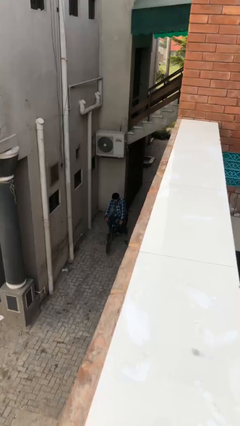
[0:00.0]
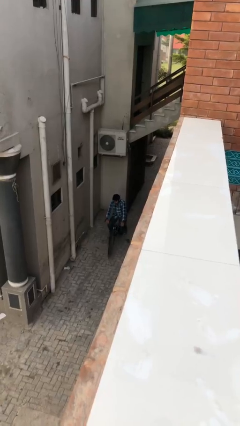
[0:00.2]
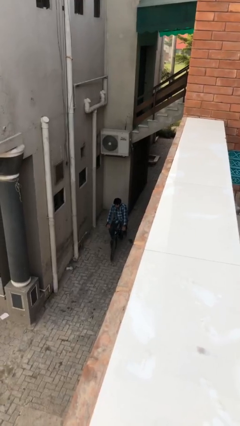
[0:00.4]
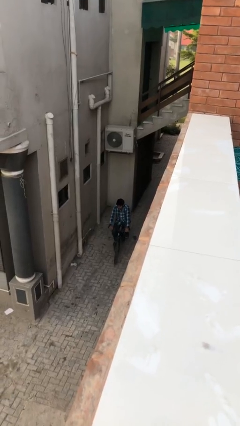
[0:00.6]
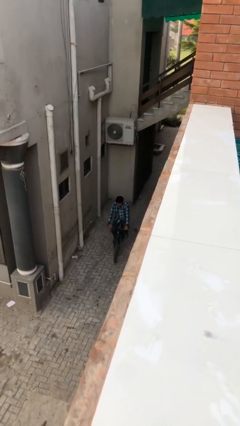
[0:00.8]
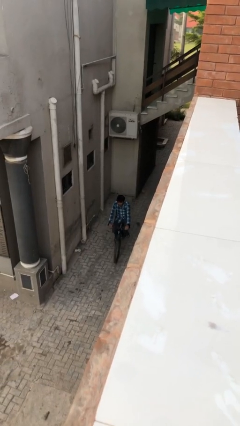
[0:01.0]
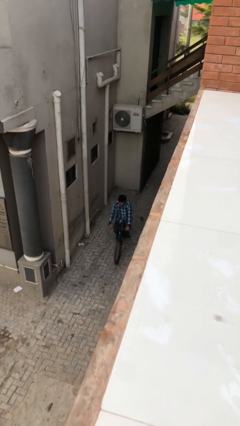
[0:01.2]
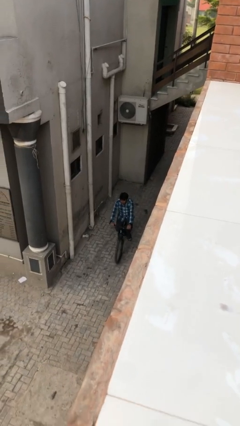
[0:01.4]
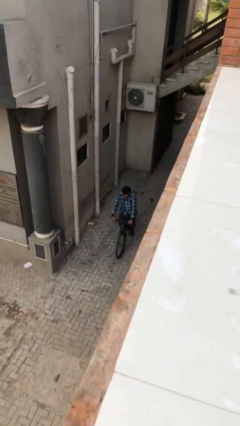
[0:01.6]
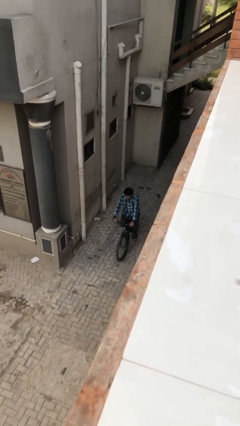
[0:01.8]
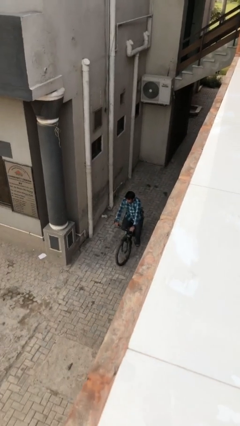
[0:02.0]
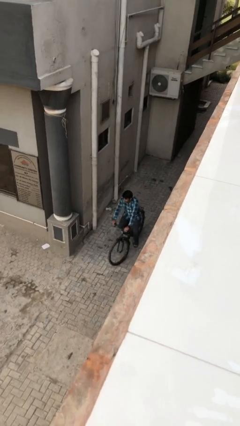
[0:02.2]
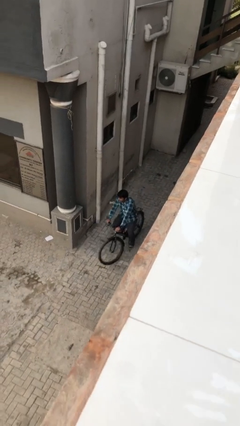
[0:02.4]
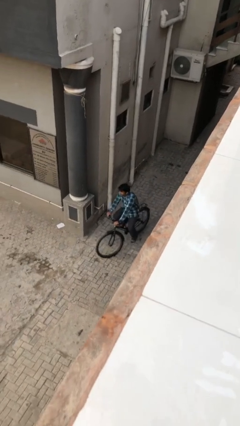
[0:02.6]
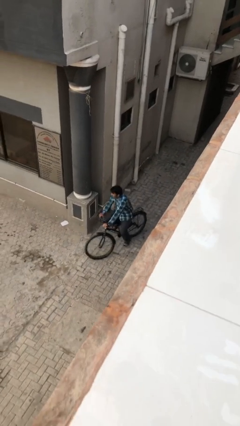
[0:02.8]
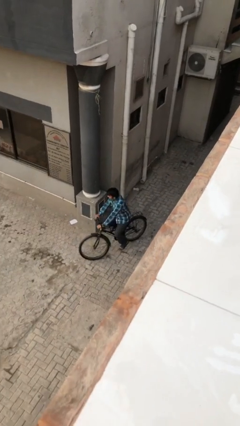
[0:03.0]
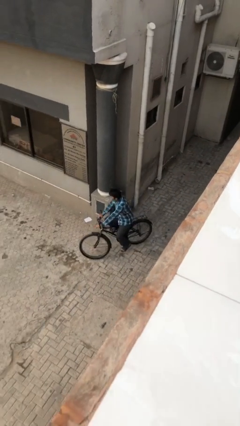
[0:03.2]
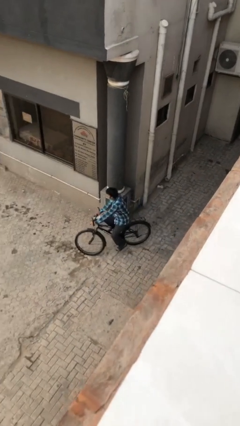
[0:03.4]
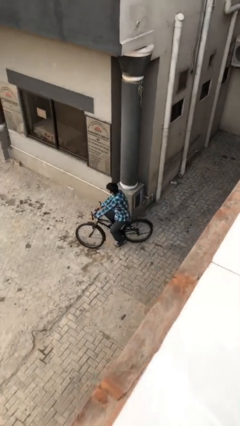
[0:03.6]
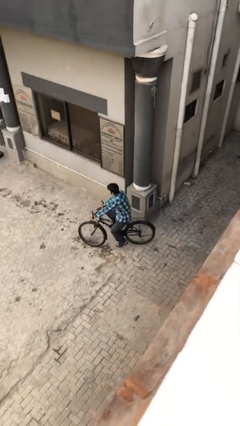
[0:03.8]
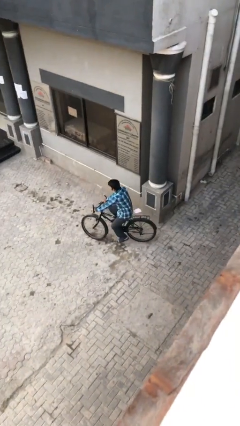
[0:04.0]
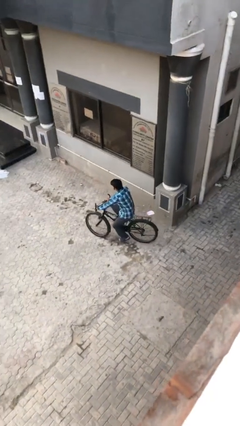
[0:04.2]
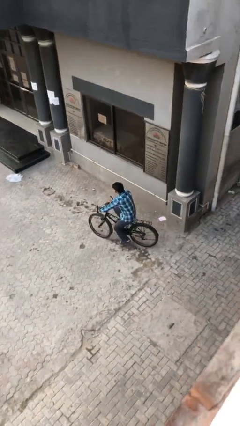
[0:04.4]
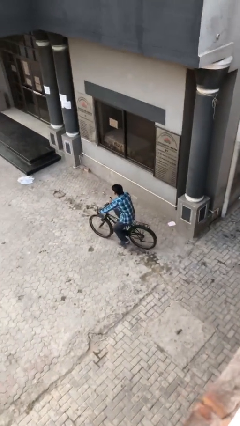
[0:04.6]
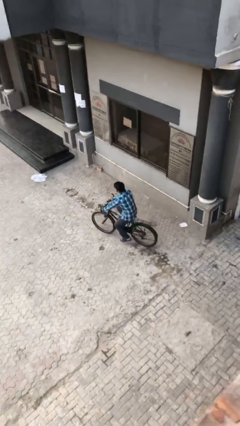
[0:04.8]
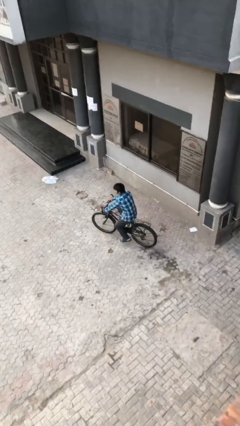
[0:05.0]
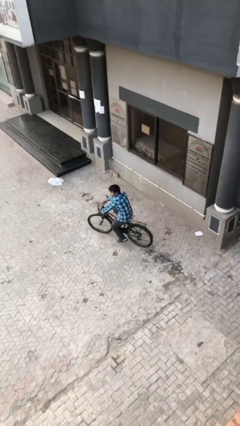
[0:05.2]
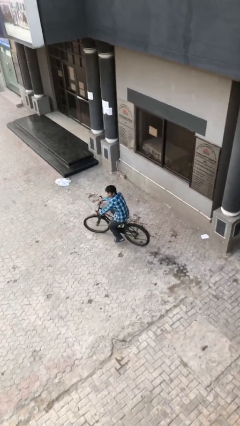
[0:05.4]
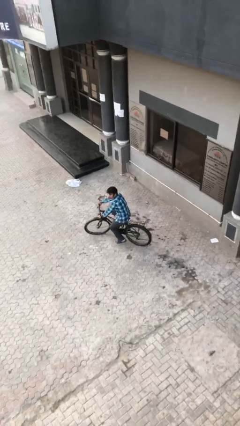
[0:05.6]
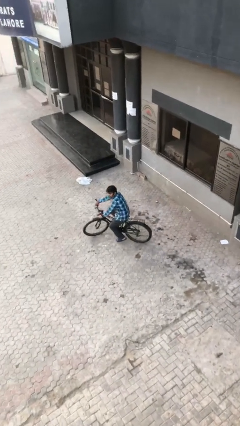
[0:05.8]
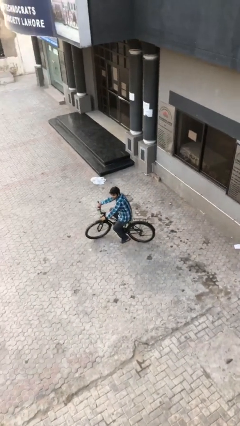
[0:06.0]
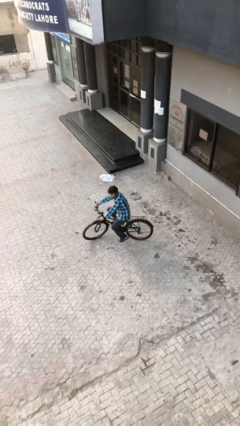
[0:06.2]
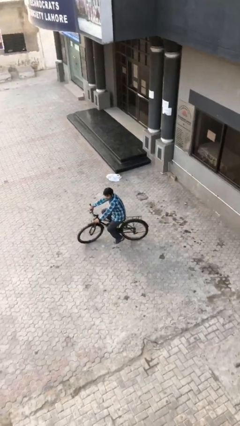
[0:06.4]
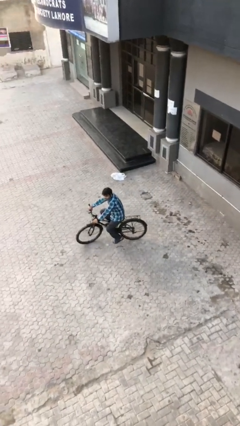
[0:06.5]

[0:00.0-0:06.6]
person rides bicycle

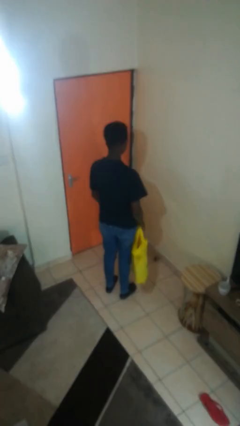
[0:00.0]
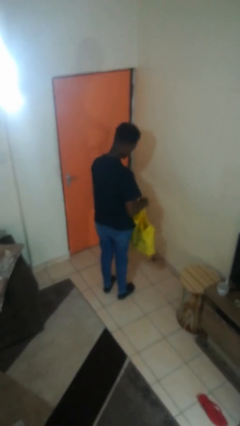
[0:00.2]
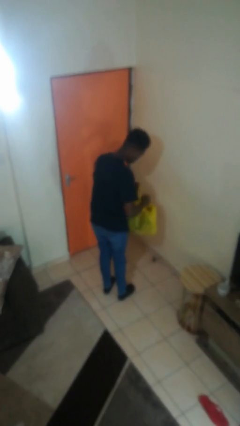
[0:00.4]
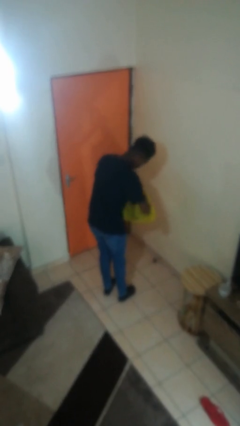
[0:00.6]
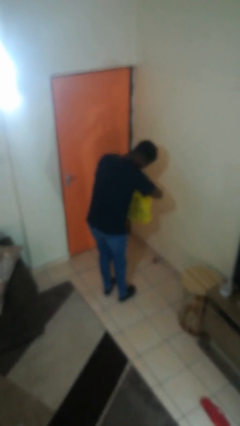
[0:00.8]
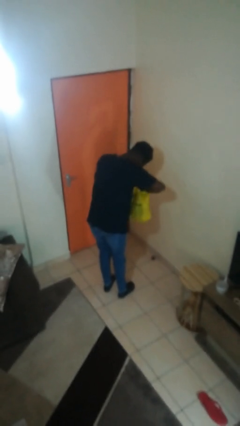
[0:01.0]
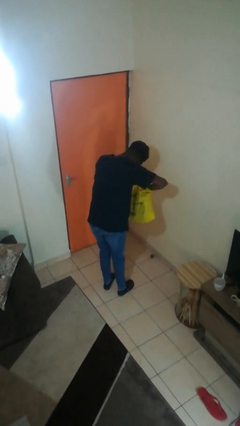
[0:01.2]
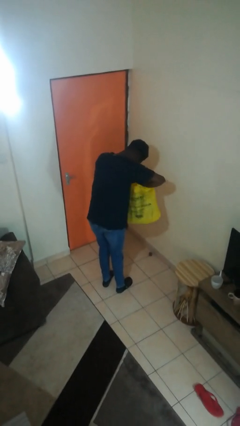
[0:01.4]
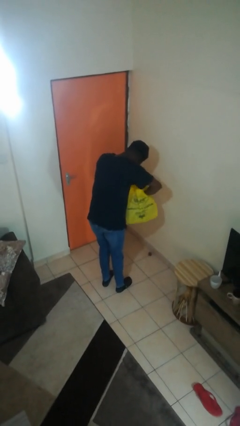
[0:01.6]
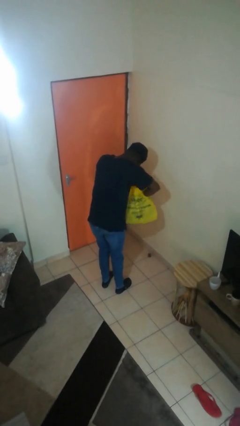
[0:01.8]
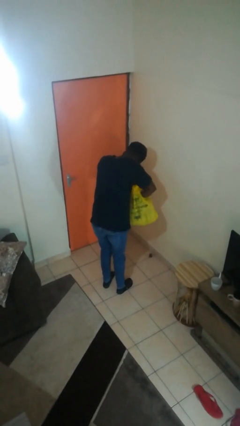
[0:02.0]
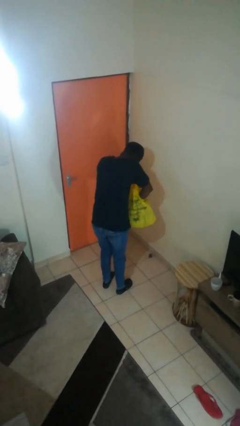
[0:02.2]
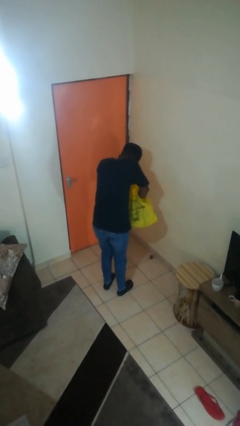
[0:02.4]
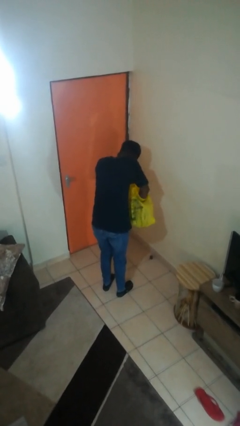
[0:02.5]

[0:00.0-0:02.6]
person searches in bag

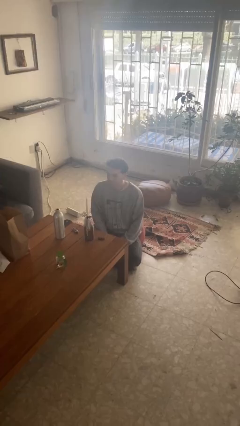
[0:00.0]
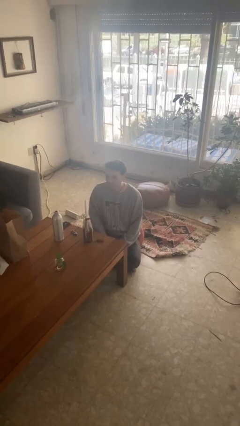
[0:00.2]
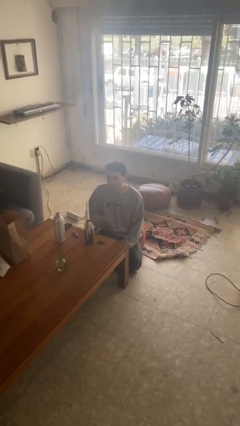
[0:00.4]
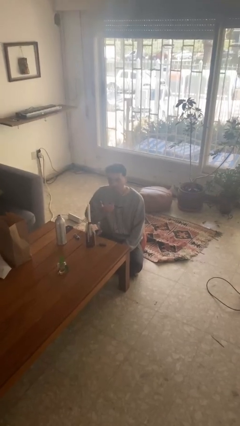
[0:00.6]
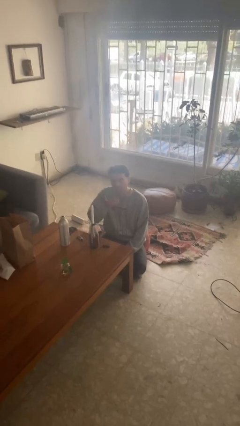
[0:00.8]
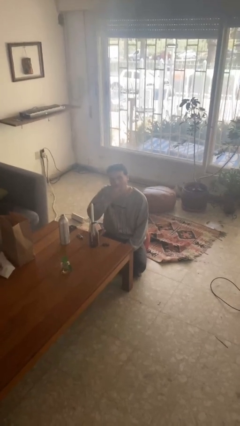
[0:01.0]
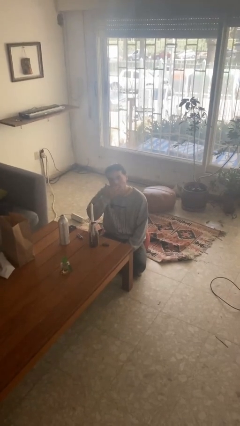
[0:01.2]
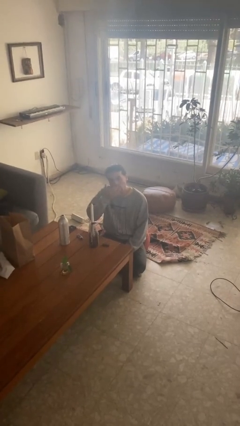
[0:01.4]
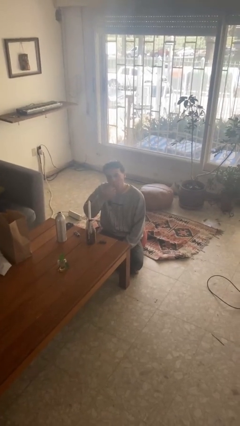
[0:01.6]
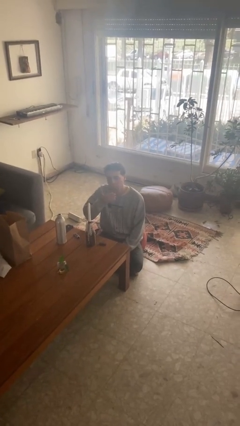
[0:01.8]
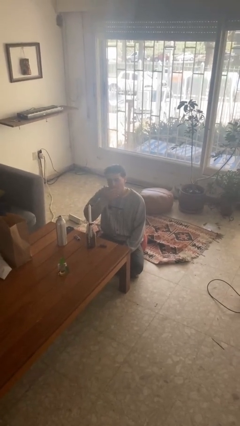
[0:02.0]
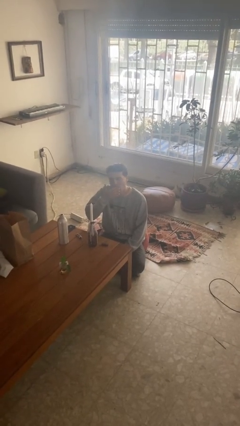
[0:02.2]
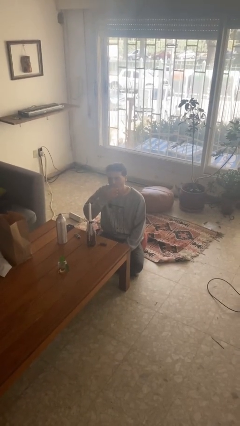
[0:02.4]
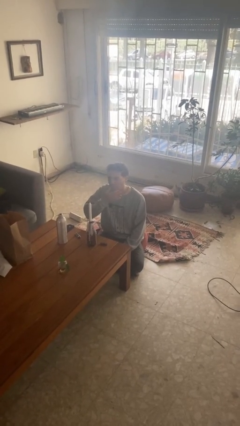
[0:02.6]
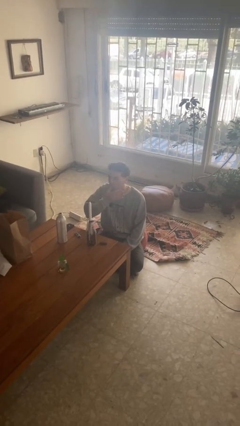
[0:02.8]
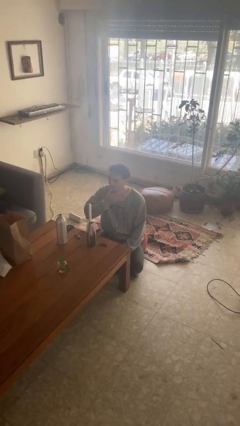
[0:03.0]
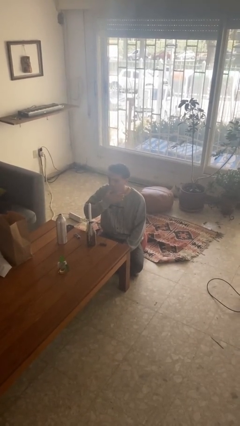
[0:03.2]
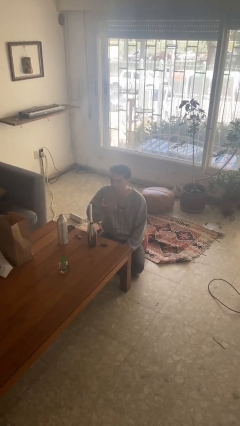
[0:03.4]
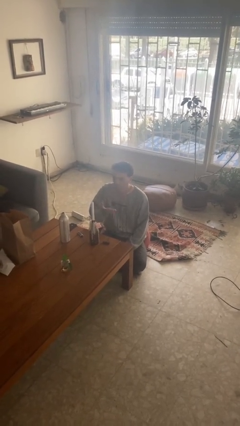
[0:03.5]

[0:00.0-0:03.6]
person licks fingers

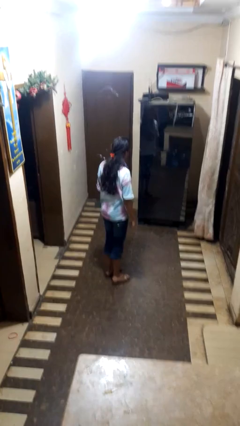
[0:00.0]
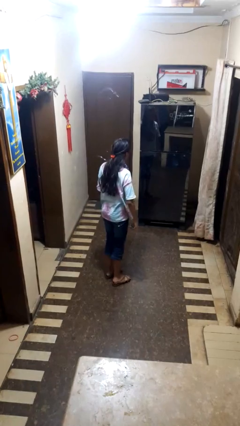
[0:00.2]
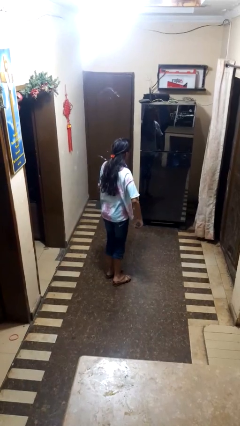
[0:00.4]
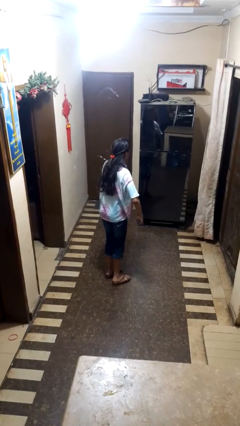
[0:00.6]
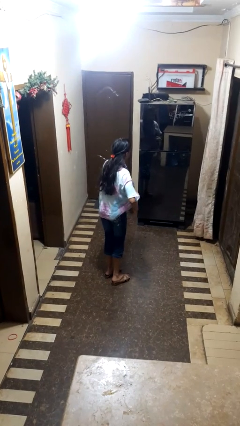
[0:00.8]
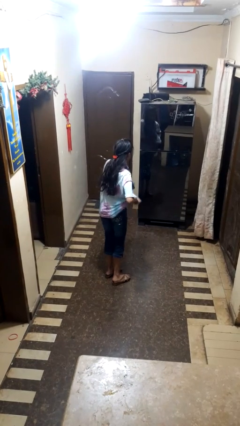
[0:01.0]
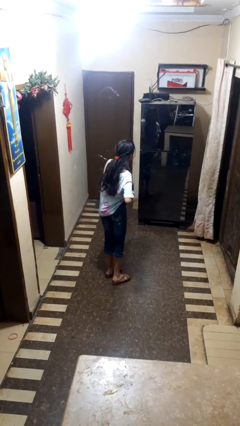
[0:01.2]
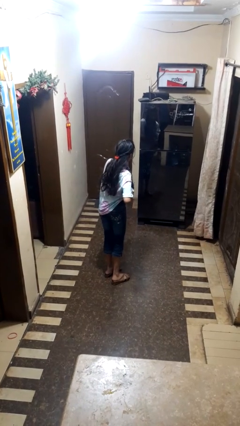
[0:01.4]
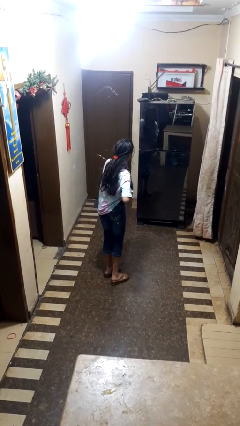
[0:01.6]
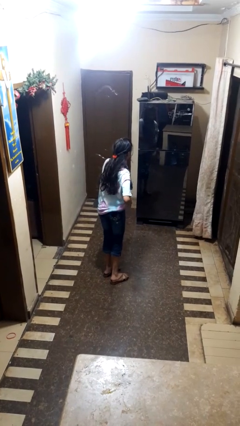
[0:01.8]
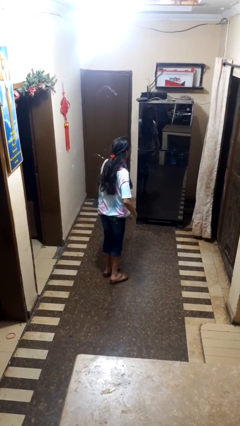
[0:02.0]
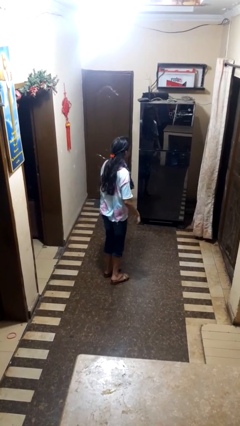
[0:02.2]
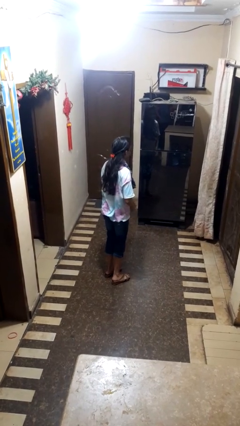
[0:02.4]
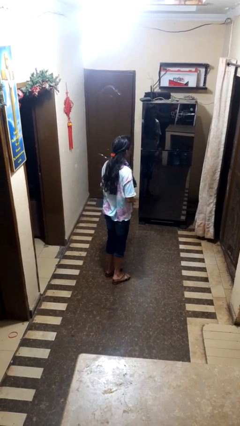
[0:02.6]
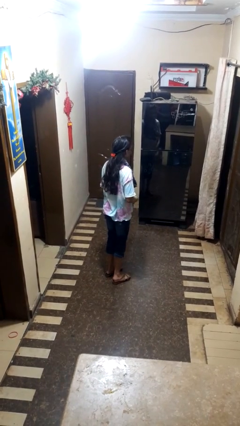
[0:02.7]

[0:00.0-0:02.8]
person applies deodorant

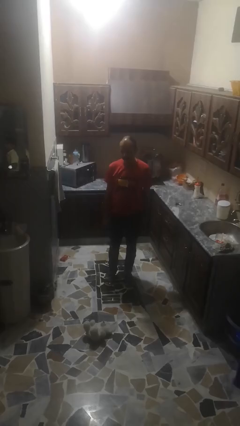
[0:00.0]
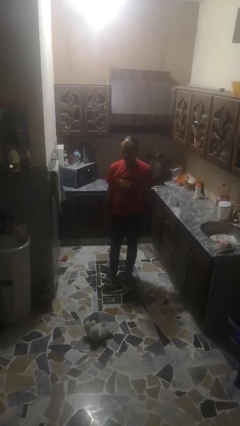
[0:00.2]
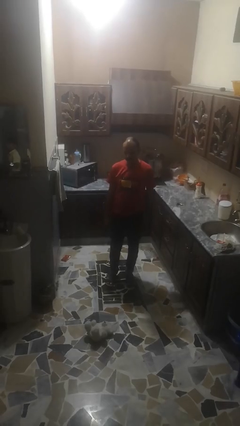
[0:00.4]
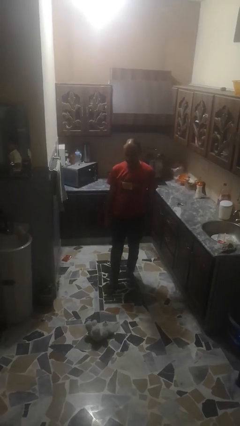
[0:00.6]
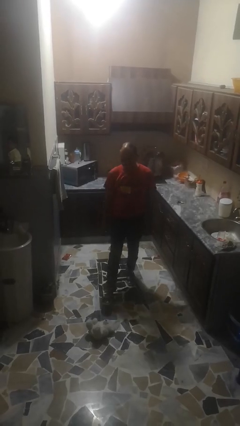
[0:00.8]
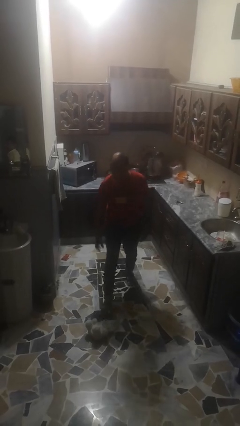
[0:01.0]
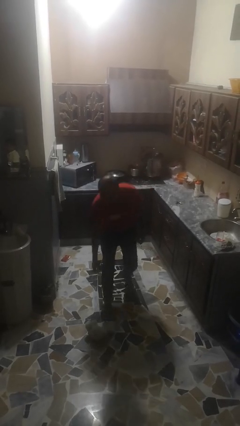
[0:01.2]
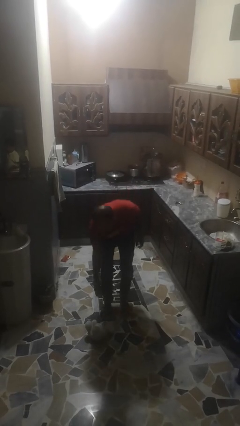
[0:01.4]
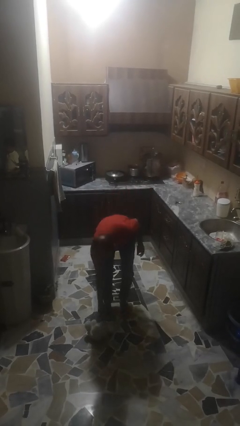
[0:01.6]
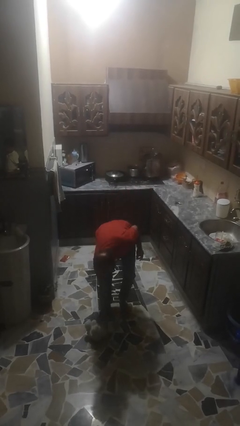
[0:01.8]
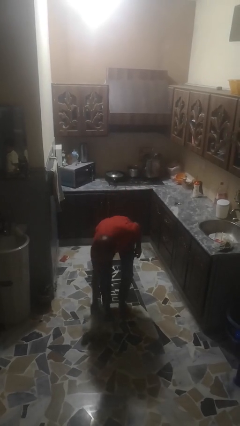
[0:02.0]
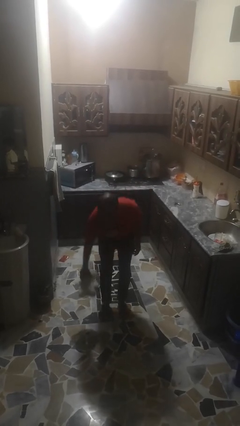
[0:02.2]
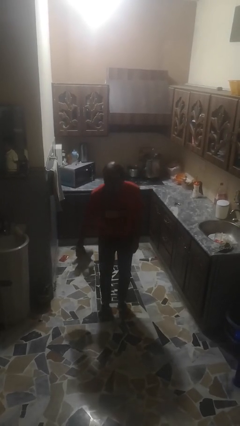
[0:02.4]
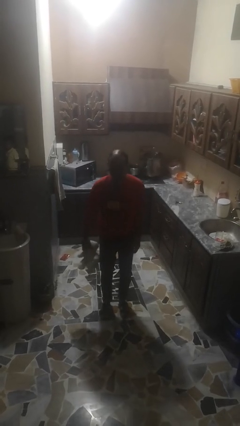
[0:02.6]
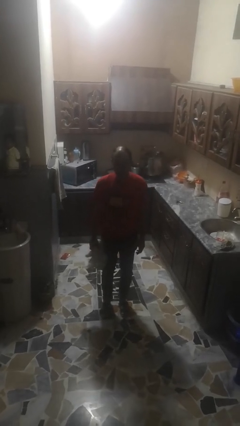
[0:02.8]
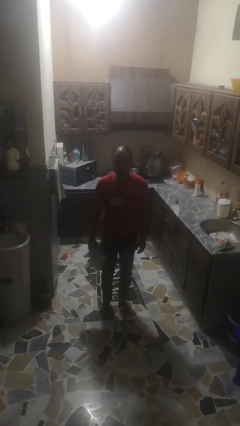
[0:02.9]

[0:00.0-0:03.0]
person picks up object from floor
